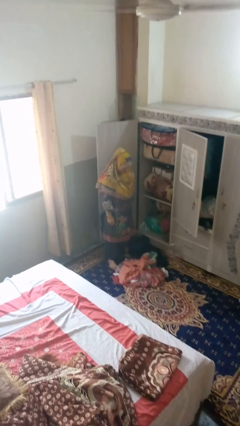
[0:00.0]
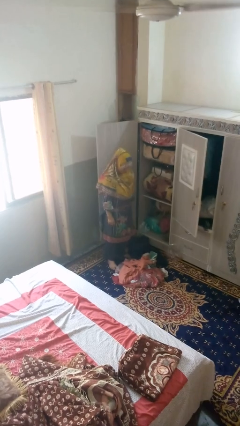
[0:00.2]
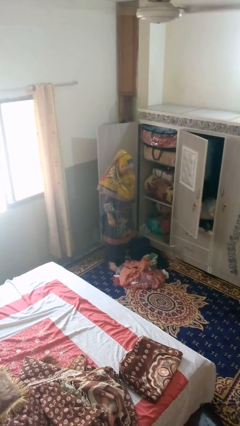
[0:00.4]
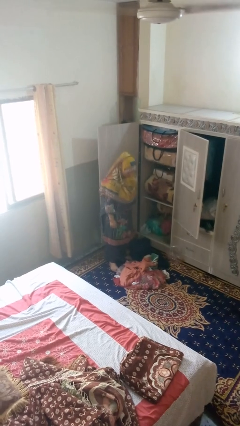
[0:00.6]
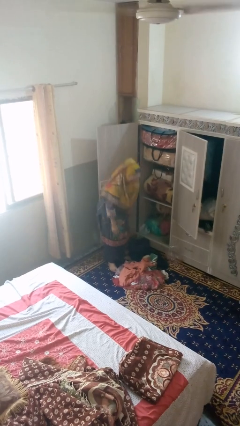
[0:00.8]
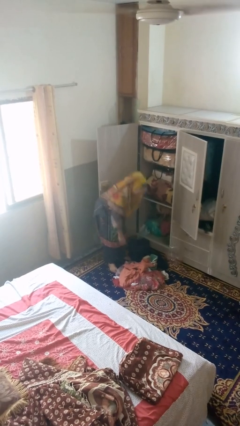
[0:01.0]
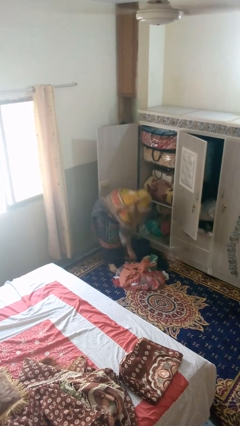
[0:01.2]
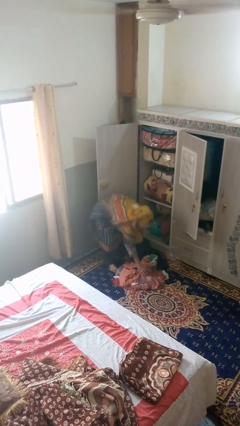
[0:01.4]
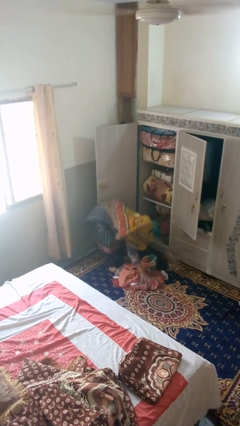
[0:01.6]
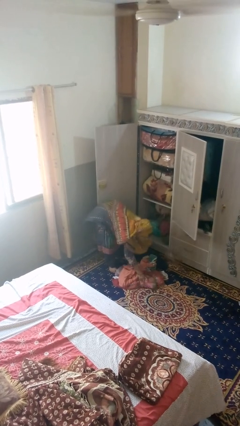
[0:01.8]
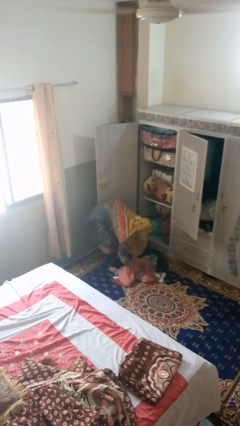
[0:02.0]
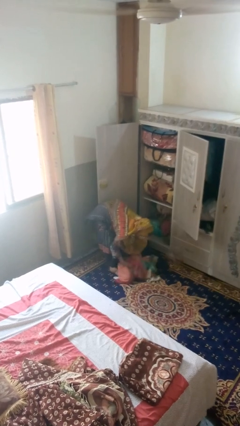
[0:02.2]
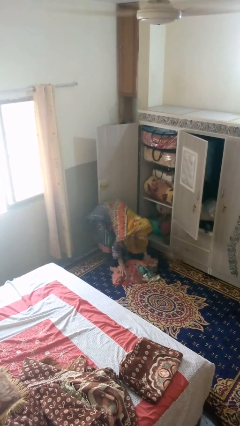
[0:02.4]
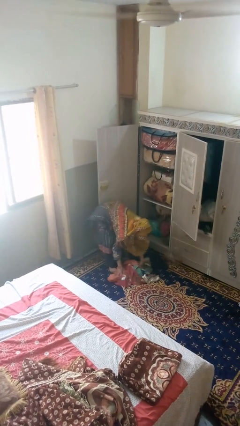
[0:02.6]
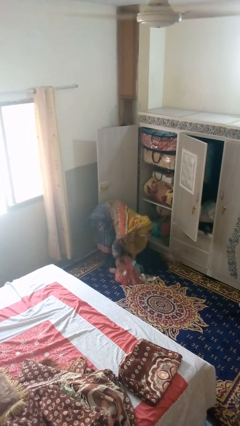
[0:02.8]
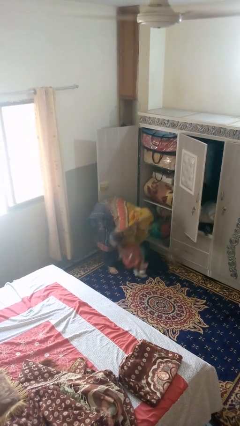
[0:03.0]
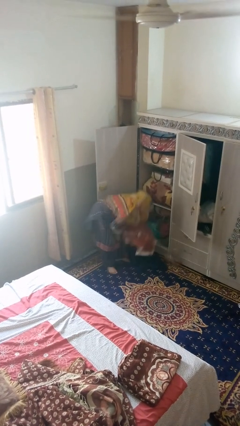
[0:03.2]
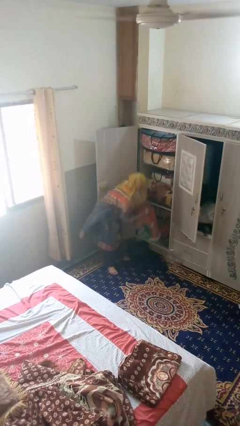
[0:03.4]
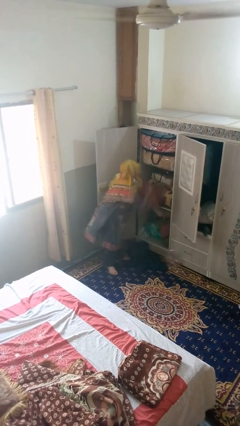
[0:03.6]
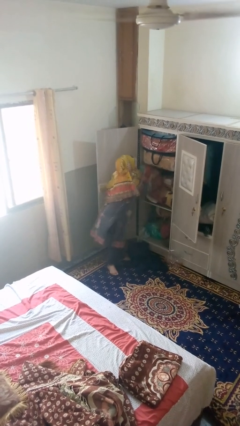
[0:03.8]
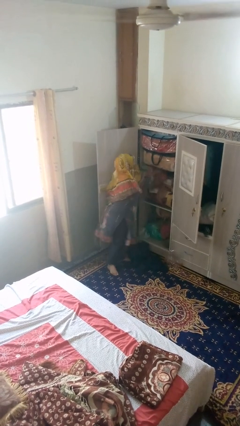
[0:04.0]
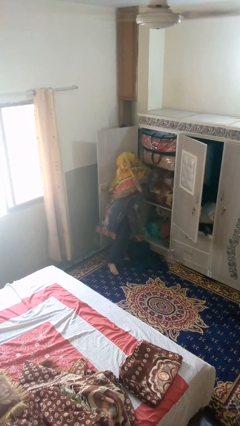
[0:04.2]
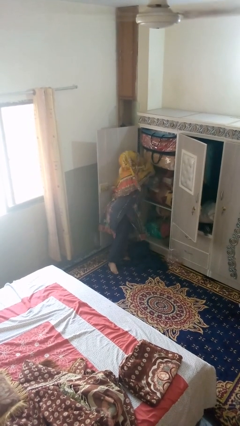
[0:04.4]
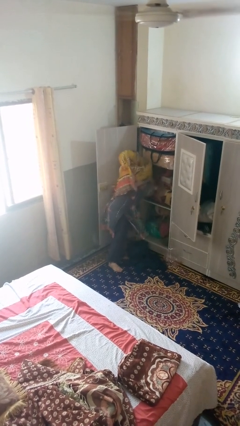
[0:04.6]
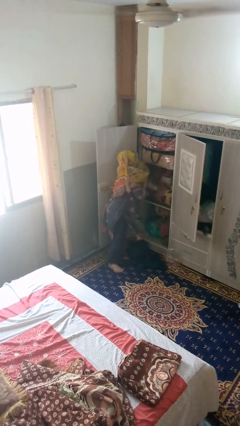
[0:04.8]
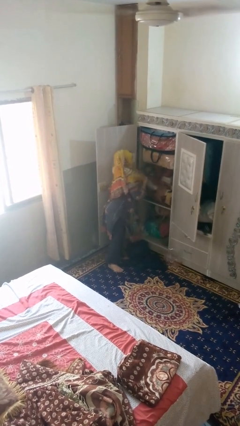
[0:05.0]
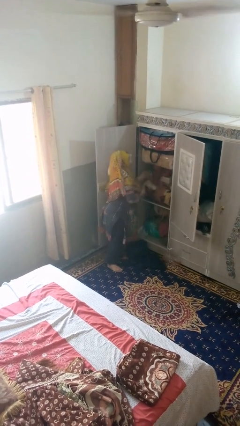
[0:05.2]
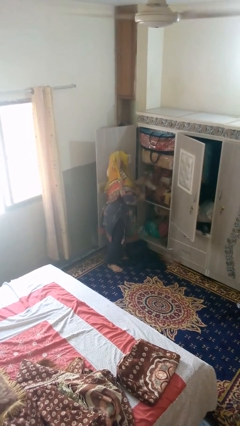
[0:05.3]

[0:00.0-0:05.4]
person takes clothes from dresser

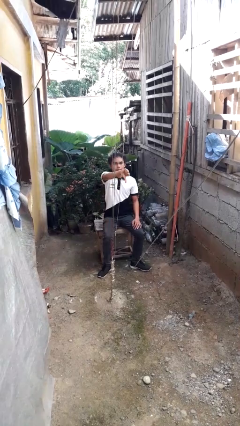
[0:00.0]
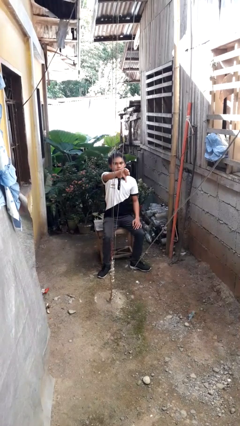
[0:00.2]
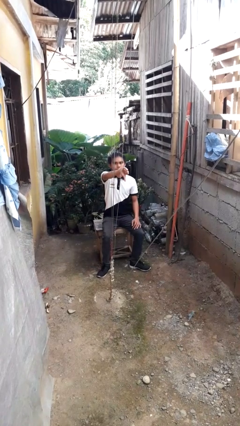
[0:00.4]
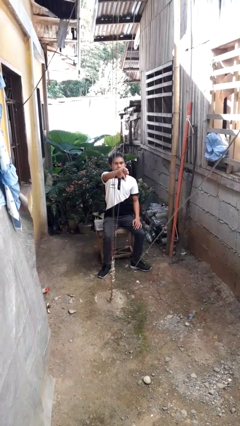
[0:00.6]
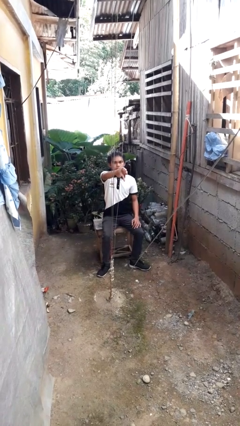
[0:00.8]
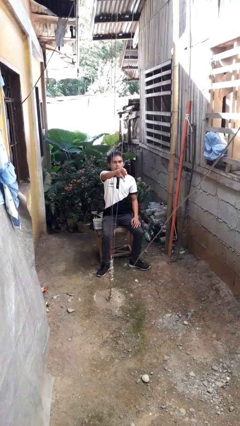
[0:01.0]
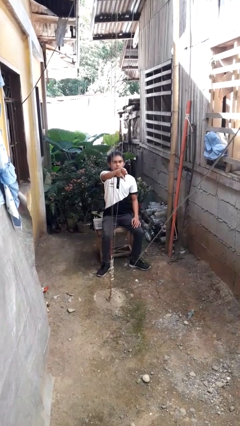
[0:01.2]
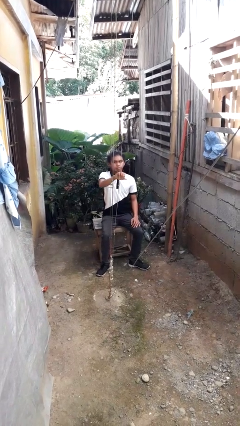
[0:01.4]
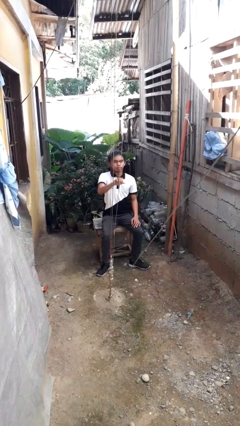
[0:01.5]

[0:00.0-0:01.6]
person gestures thumbs down

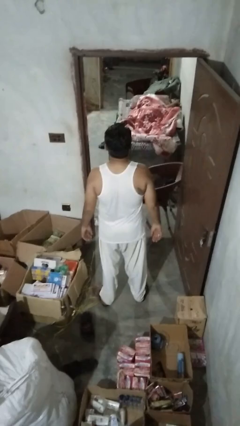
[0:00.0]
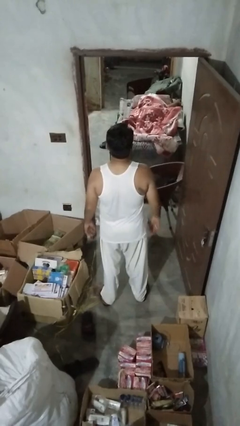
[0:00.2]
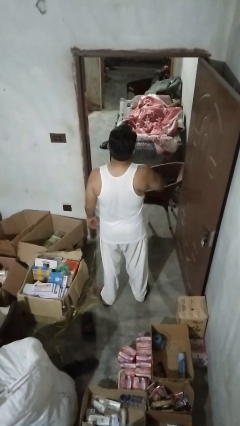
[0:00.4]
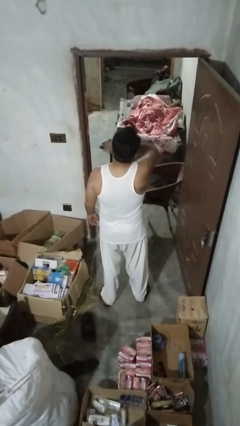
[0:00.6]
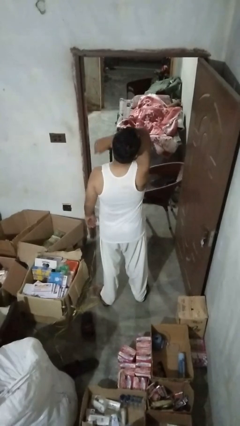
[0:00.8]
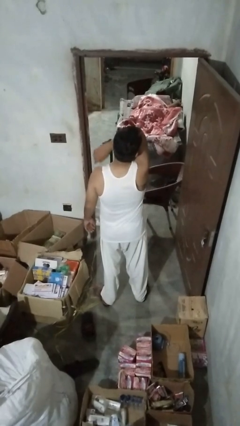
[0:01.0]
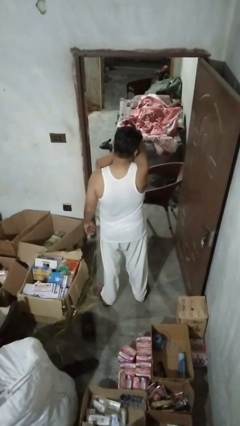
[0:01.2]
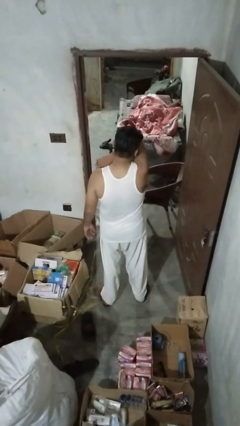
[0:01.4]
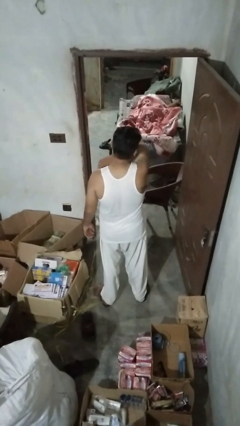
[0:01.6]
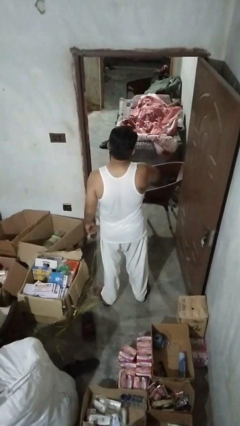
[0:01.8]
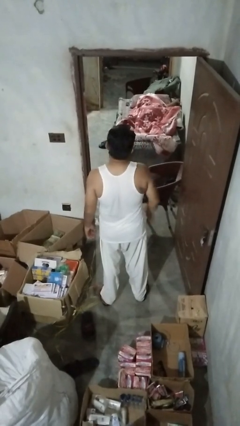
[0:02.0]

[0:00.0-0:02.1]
person sneezes into arm

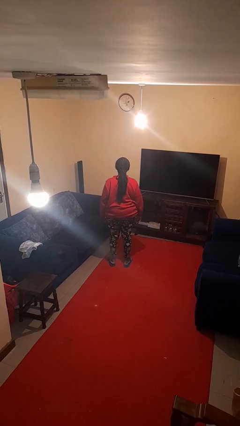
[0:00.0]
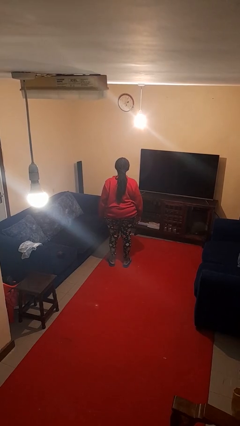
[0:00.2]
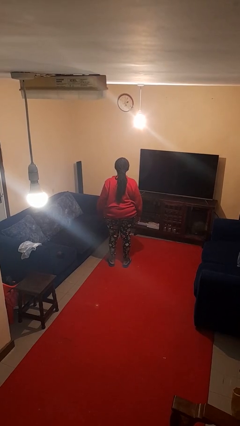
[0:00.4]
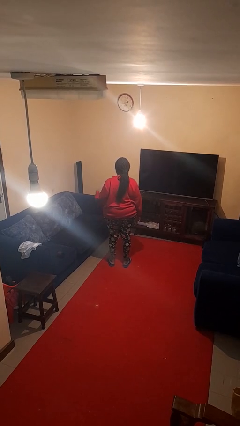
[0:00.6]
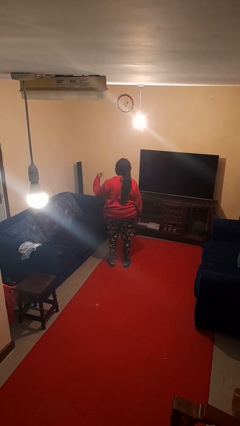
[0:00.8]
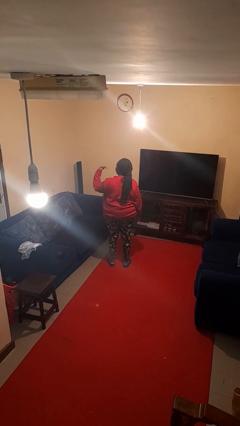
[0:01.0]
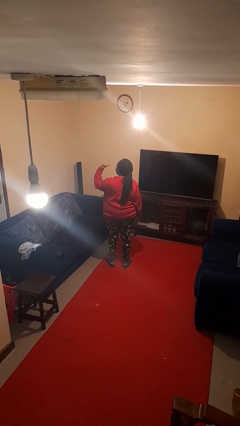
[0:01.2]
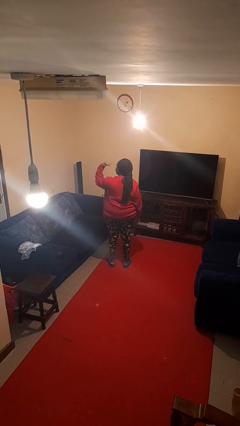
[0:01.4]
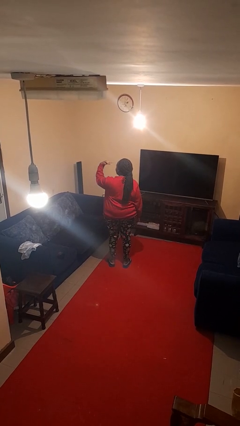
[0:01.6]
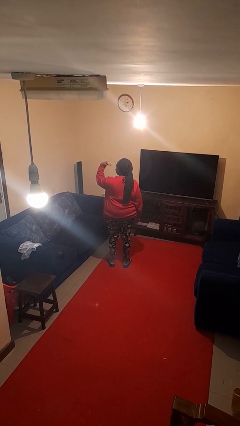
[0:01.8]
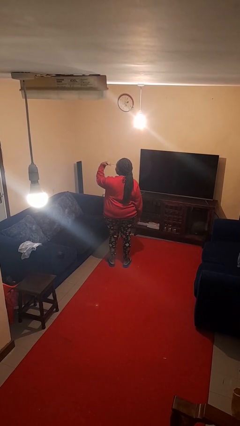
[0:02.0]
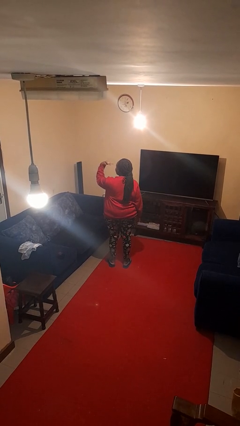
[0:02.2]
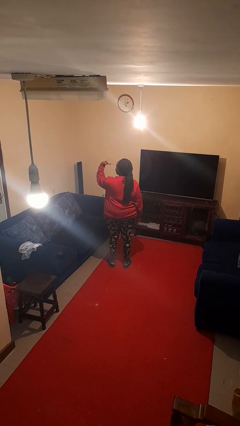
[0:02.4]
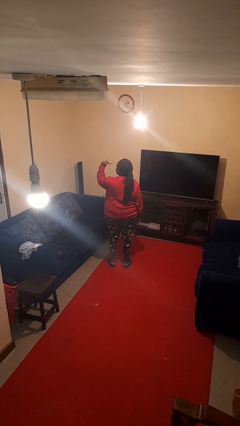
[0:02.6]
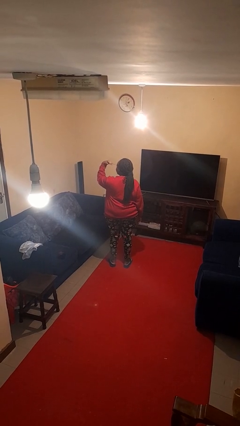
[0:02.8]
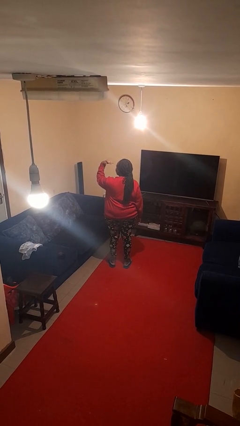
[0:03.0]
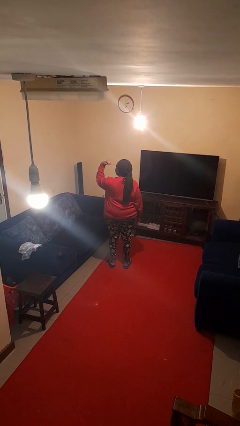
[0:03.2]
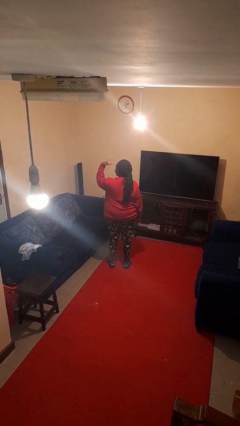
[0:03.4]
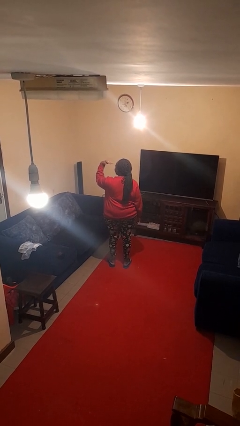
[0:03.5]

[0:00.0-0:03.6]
person gestures watch closely

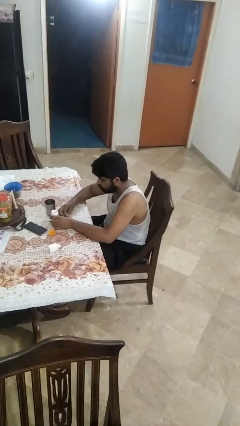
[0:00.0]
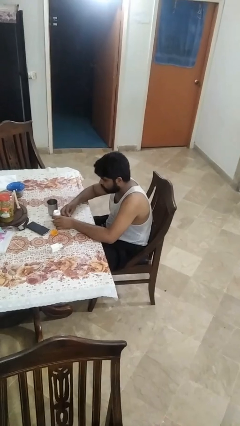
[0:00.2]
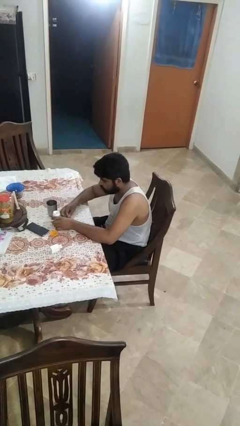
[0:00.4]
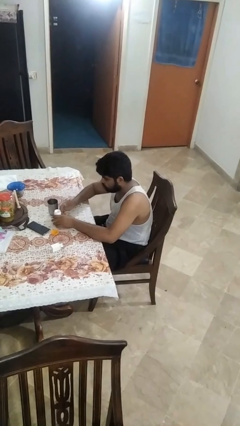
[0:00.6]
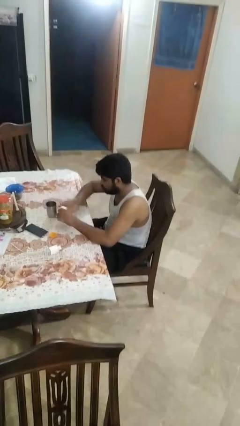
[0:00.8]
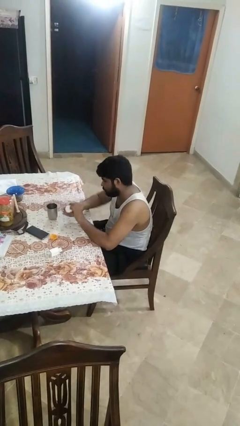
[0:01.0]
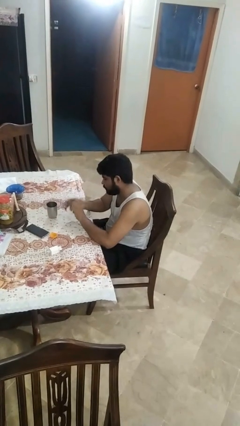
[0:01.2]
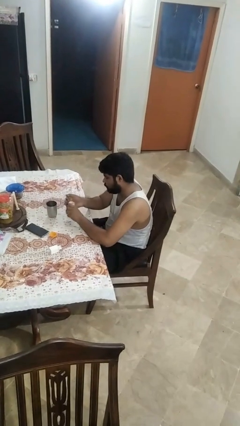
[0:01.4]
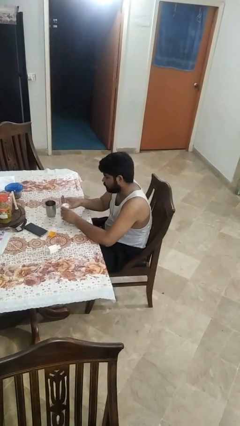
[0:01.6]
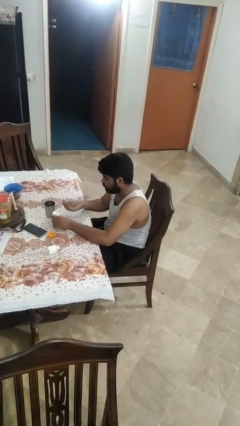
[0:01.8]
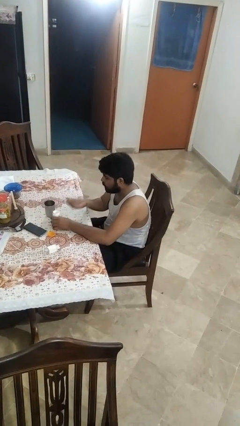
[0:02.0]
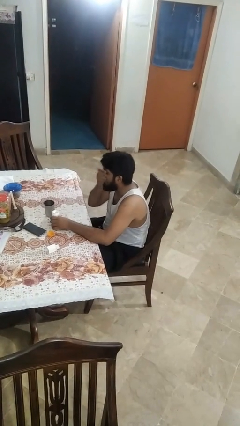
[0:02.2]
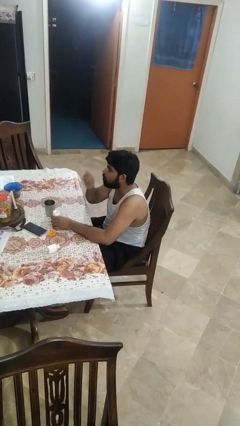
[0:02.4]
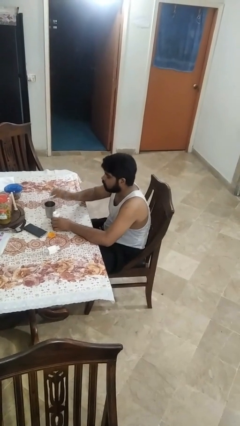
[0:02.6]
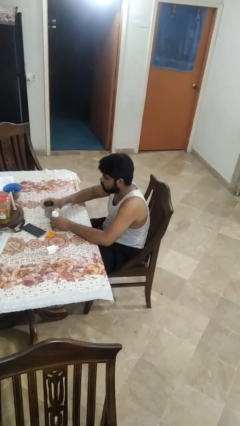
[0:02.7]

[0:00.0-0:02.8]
person takes medicine pills

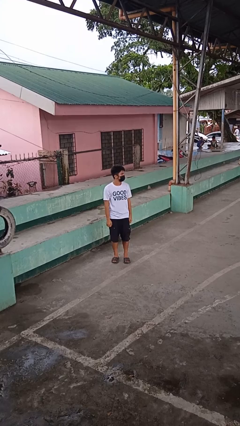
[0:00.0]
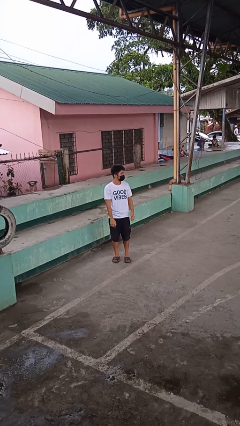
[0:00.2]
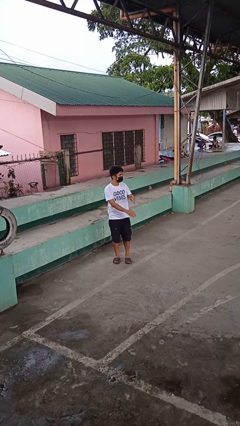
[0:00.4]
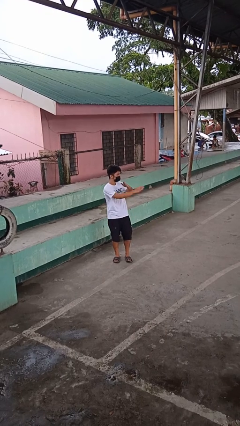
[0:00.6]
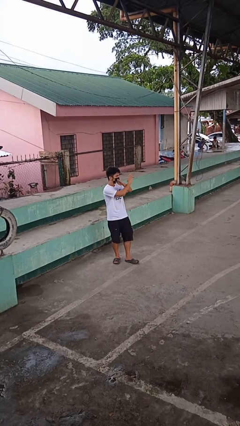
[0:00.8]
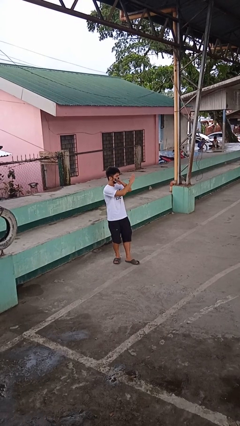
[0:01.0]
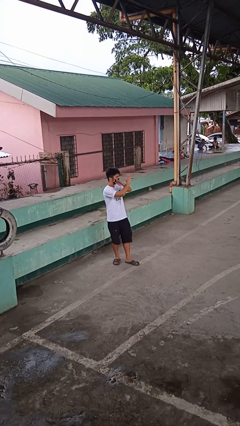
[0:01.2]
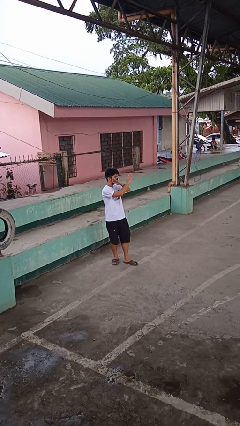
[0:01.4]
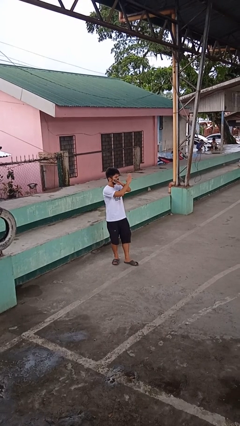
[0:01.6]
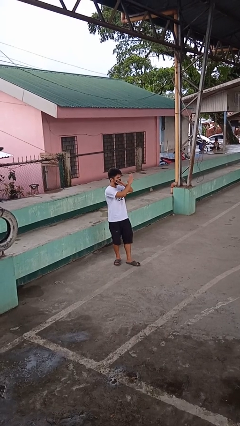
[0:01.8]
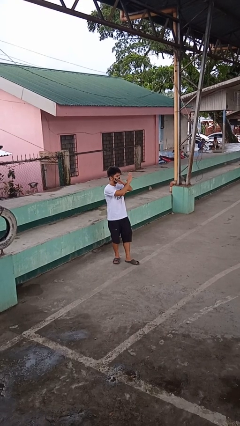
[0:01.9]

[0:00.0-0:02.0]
person gestures arms x
